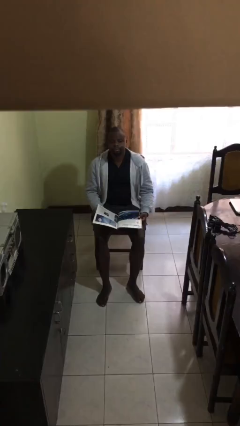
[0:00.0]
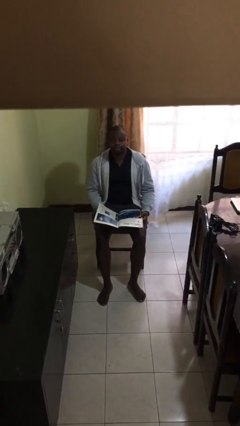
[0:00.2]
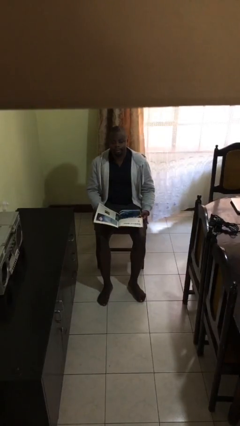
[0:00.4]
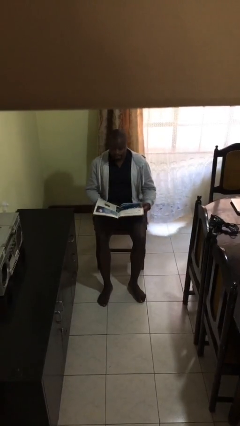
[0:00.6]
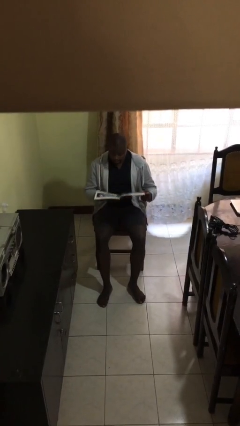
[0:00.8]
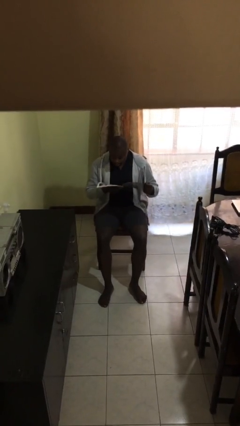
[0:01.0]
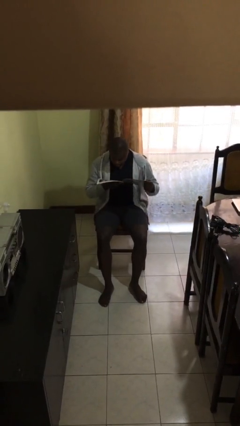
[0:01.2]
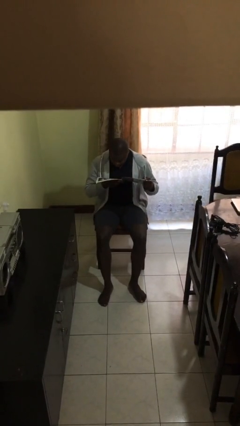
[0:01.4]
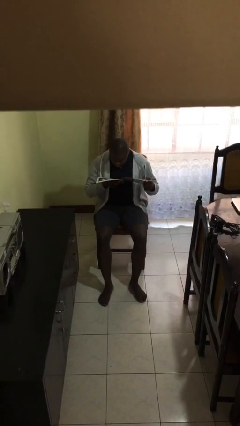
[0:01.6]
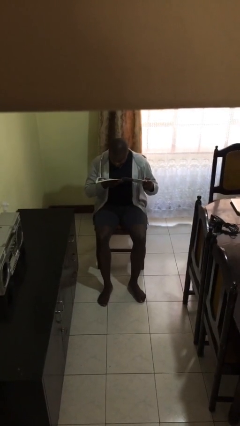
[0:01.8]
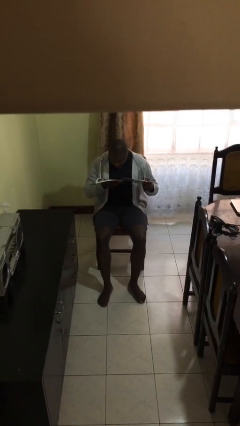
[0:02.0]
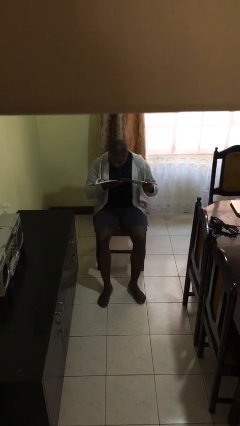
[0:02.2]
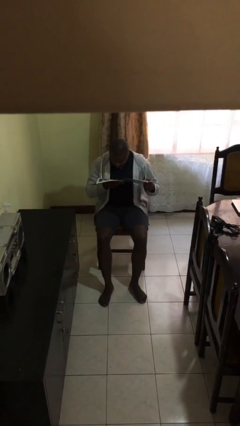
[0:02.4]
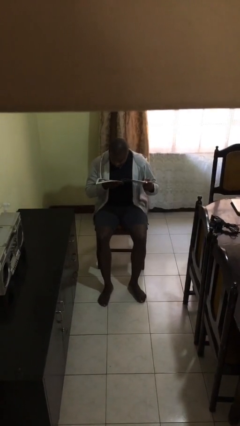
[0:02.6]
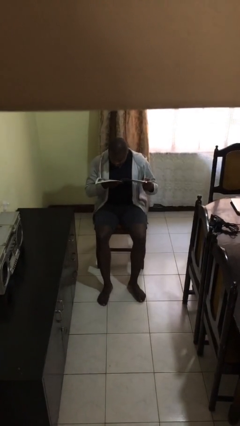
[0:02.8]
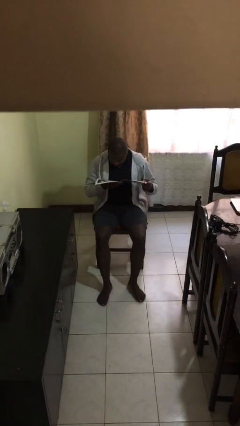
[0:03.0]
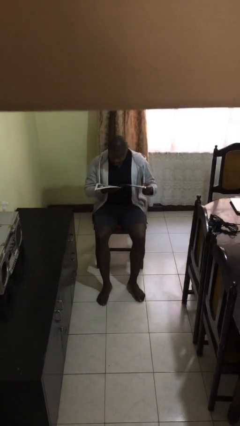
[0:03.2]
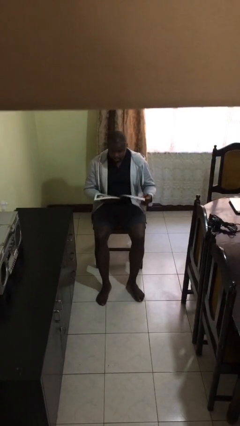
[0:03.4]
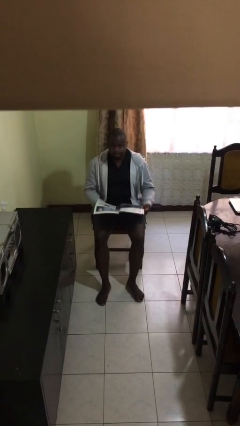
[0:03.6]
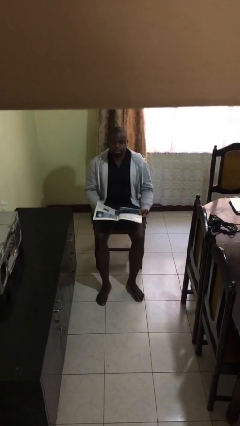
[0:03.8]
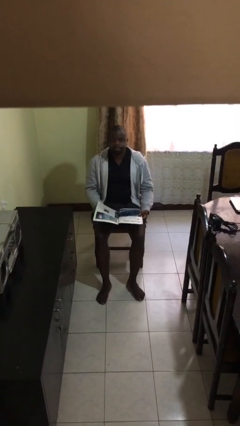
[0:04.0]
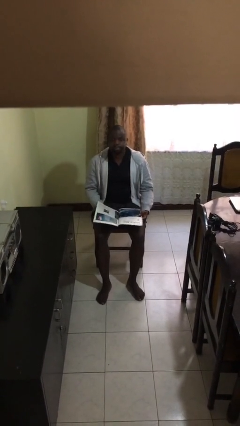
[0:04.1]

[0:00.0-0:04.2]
person reads document

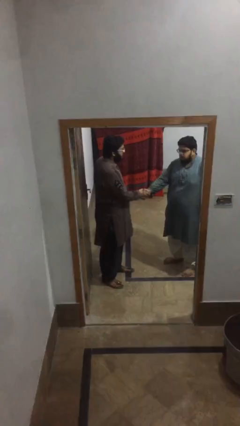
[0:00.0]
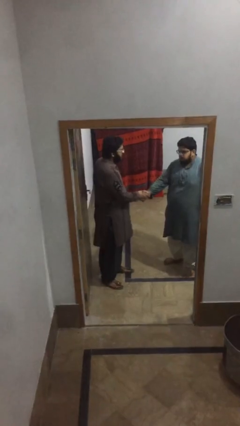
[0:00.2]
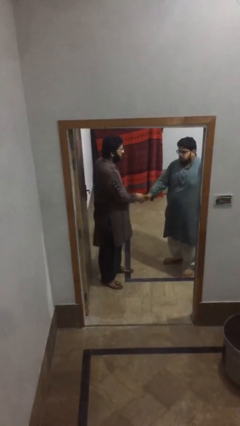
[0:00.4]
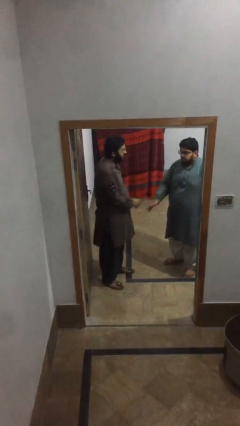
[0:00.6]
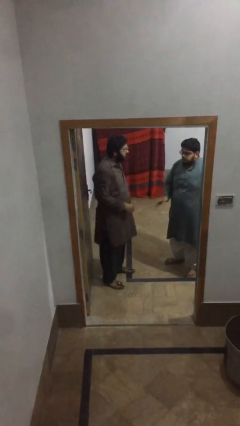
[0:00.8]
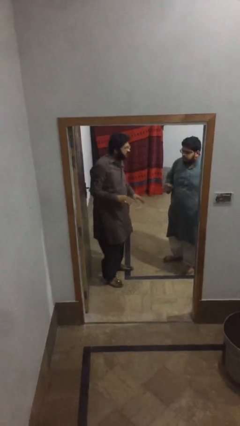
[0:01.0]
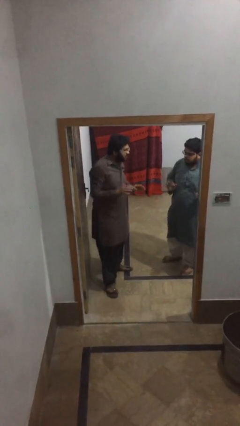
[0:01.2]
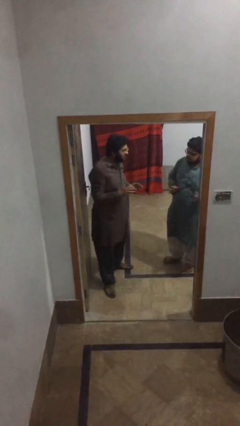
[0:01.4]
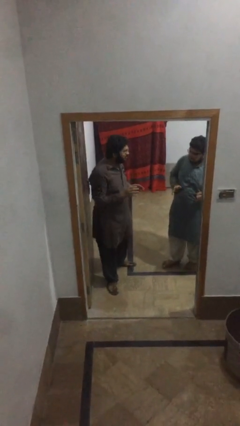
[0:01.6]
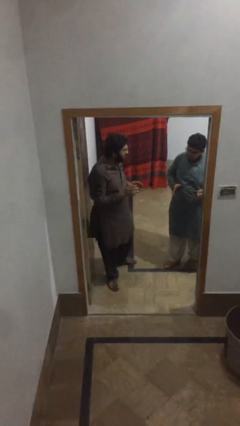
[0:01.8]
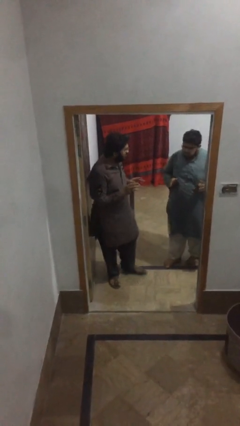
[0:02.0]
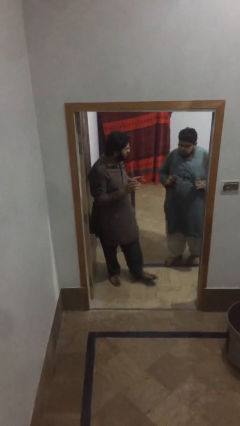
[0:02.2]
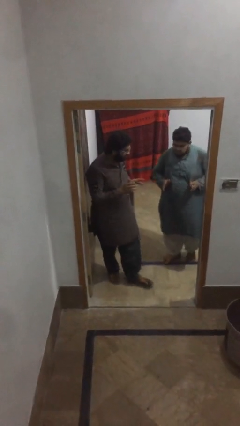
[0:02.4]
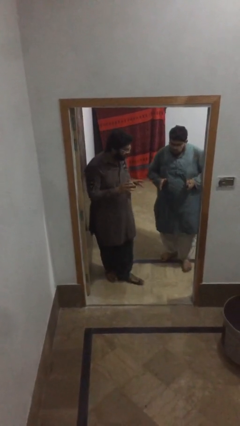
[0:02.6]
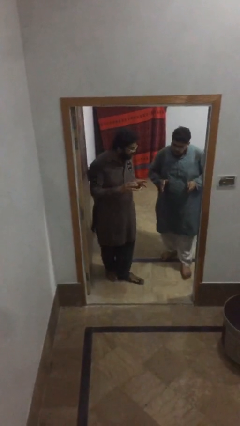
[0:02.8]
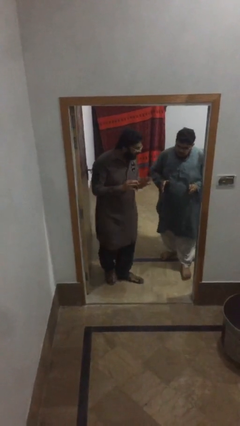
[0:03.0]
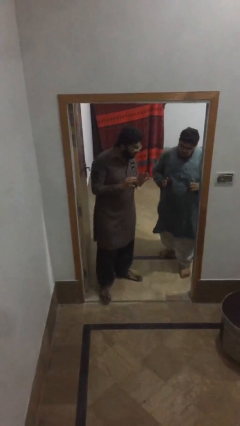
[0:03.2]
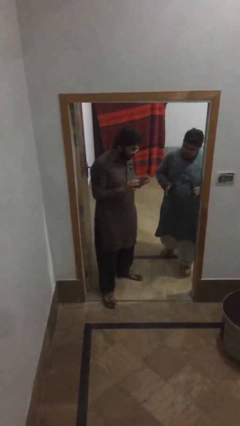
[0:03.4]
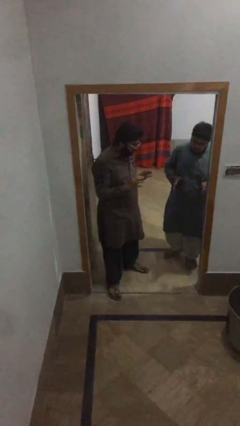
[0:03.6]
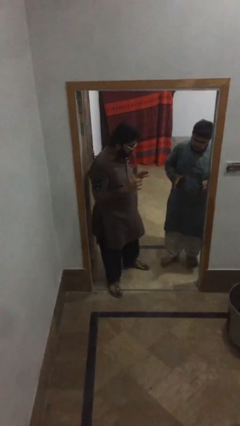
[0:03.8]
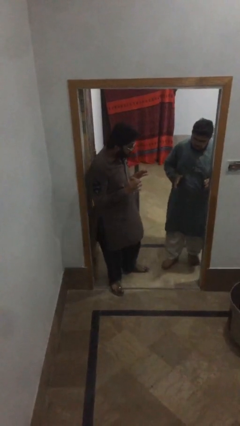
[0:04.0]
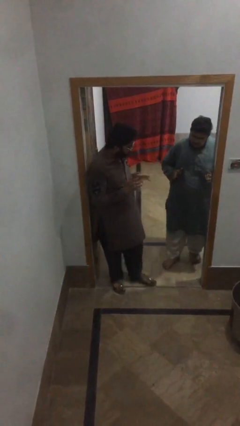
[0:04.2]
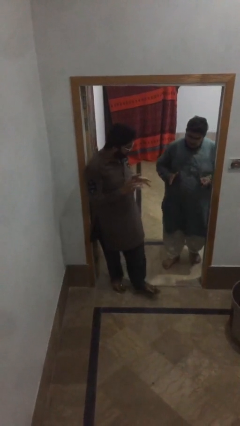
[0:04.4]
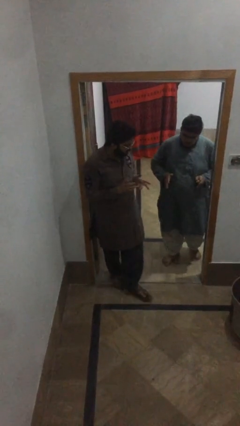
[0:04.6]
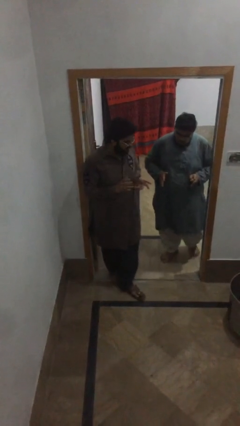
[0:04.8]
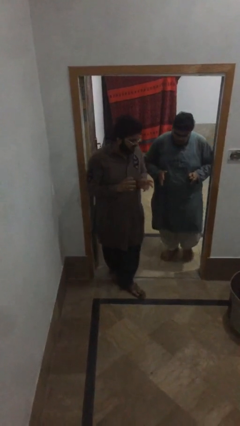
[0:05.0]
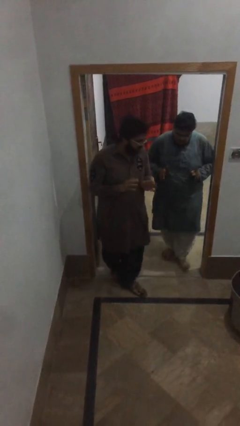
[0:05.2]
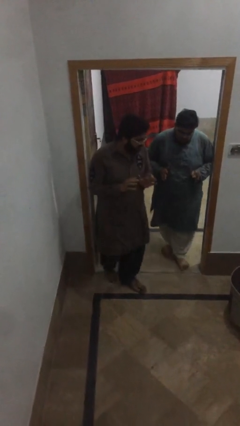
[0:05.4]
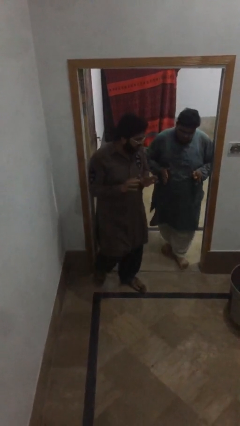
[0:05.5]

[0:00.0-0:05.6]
person talks to person

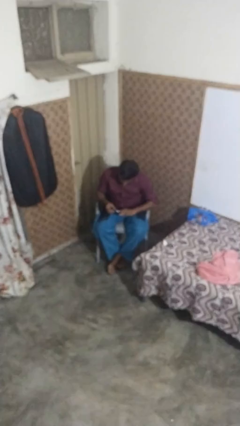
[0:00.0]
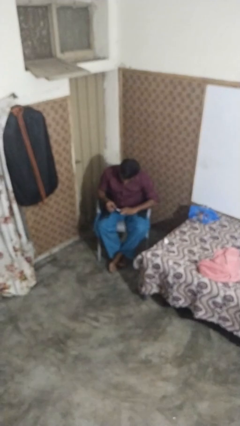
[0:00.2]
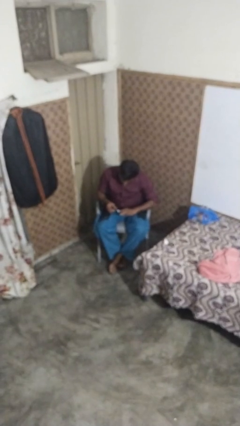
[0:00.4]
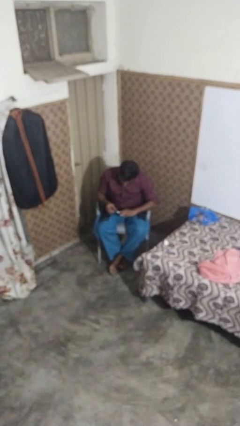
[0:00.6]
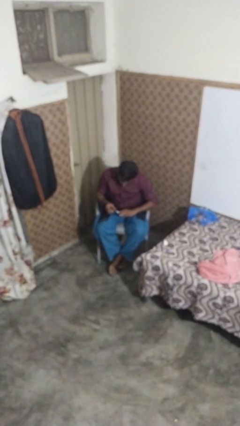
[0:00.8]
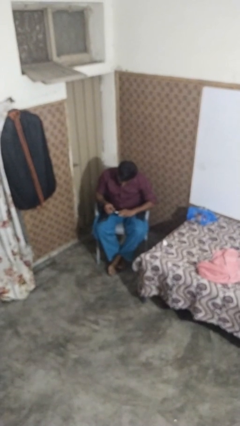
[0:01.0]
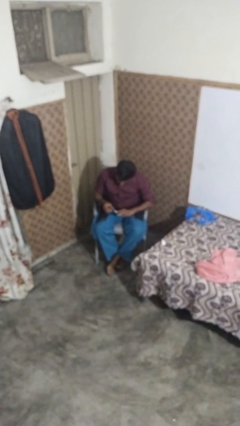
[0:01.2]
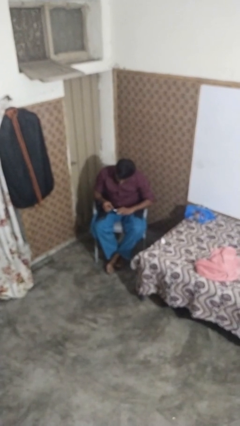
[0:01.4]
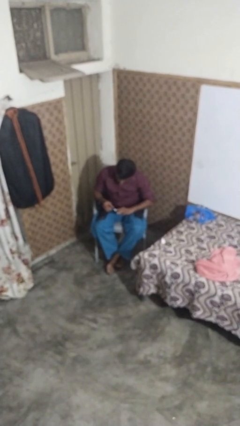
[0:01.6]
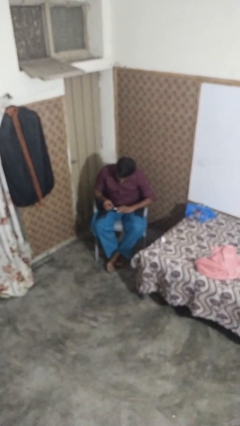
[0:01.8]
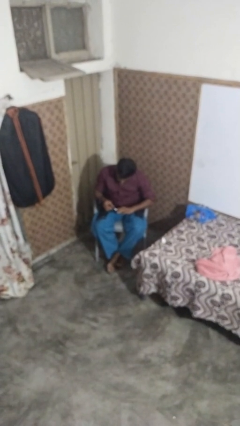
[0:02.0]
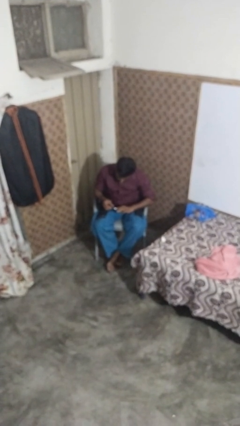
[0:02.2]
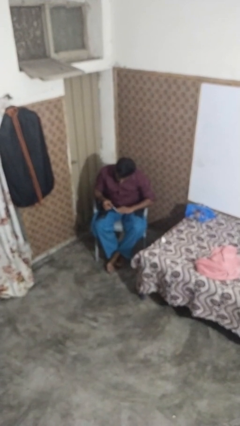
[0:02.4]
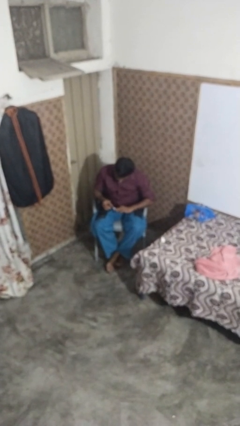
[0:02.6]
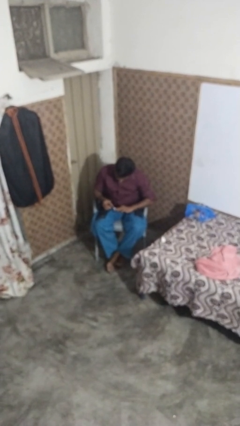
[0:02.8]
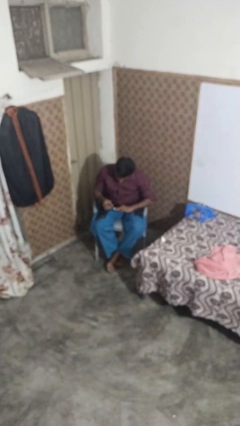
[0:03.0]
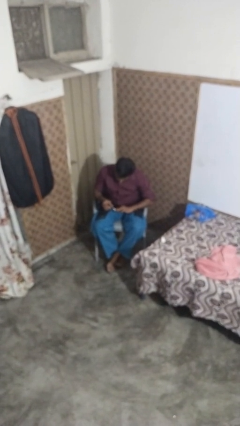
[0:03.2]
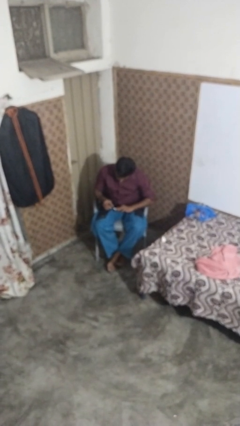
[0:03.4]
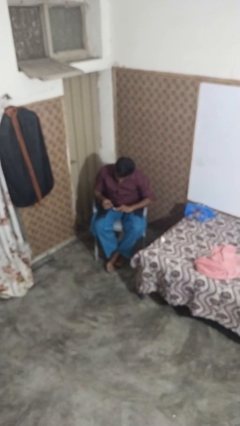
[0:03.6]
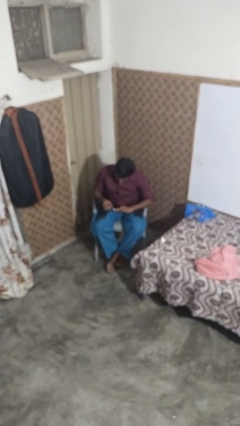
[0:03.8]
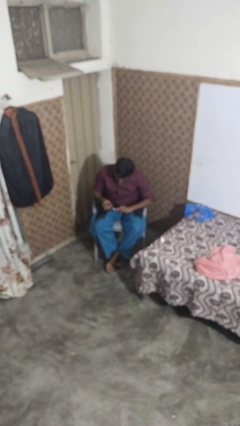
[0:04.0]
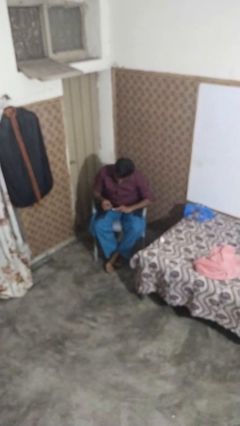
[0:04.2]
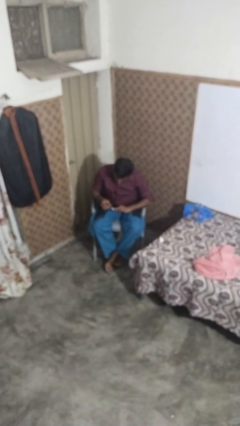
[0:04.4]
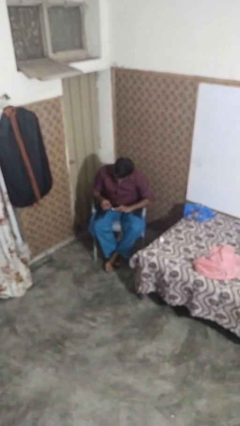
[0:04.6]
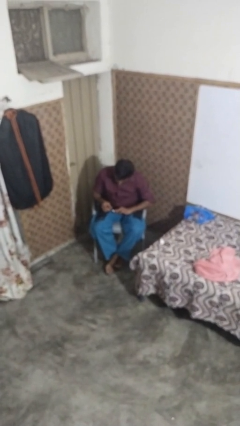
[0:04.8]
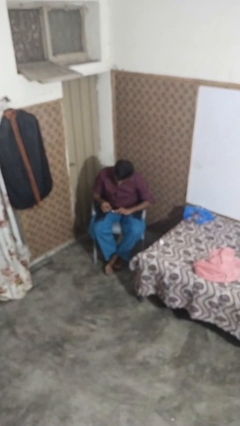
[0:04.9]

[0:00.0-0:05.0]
person paints fingernails

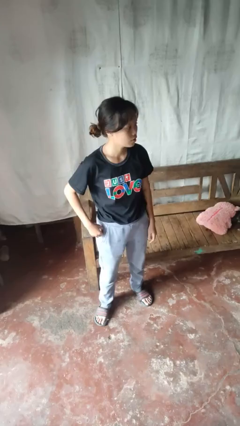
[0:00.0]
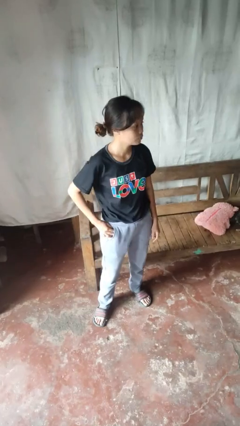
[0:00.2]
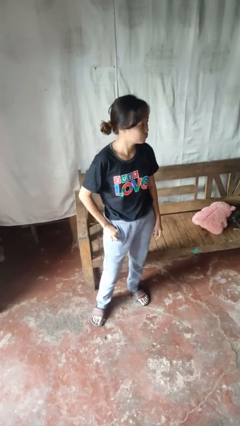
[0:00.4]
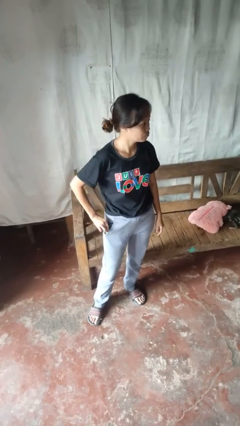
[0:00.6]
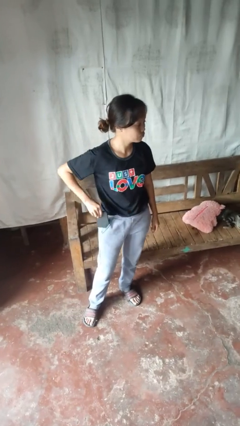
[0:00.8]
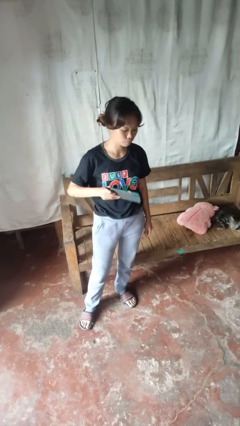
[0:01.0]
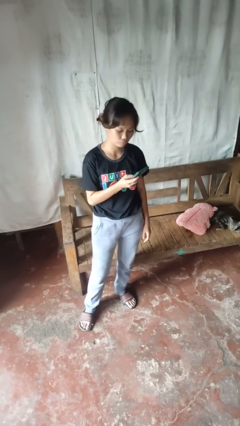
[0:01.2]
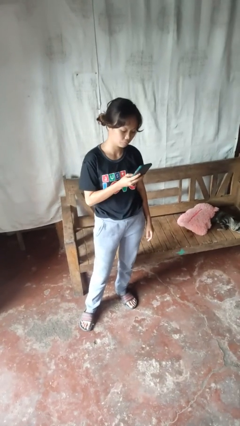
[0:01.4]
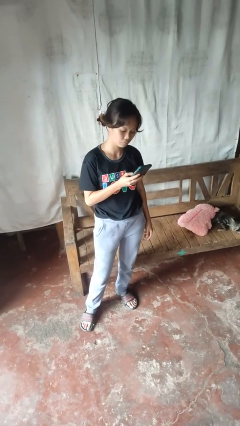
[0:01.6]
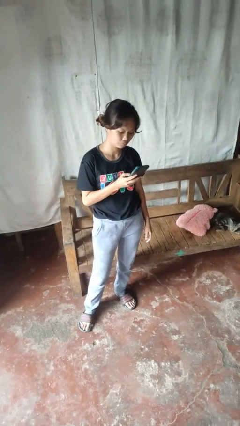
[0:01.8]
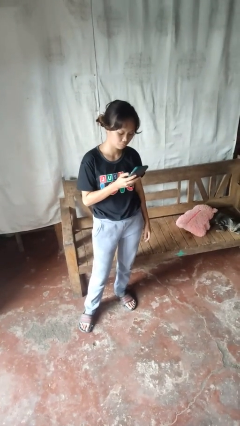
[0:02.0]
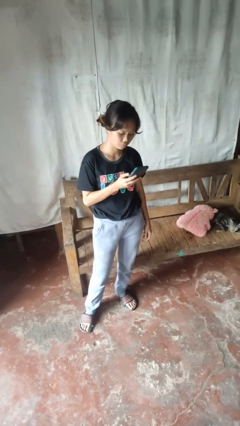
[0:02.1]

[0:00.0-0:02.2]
person takes phone from pocket

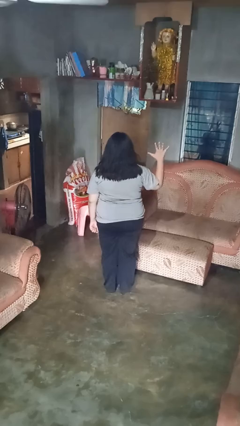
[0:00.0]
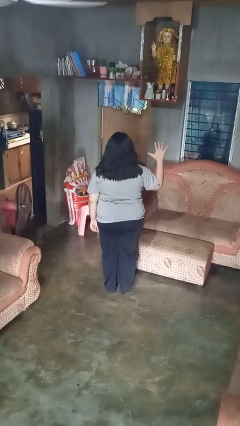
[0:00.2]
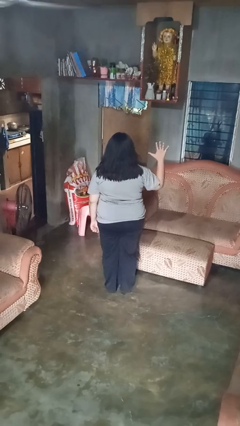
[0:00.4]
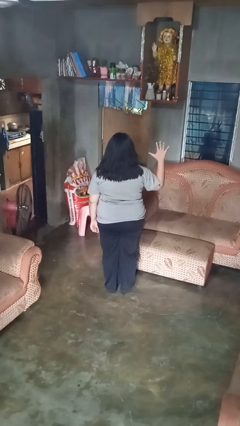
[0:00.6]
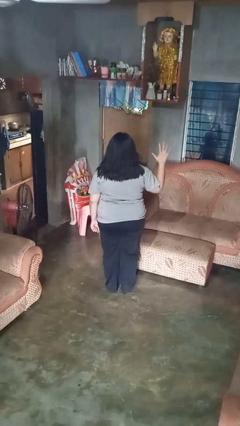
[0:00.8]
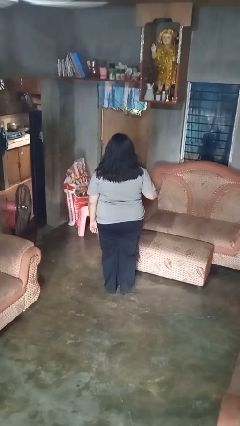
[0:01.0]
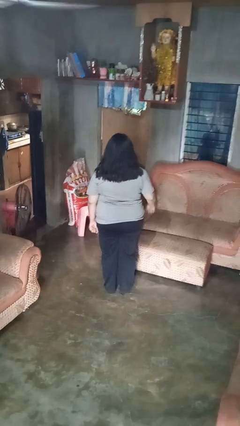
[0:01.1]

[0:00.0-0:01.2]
person gestures number five
